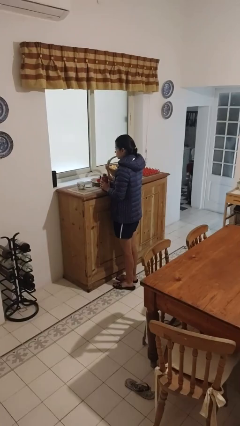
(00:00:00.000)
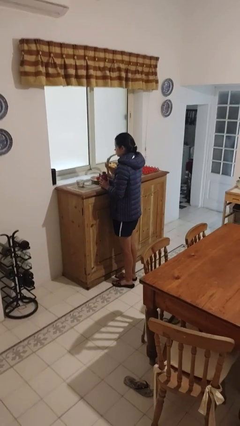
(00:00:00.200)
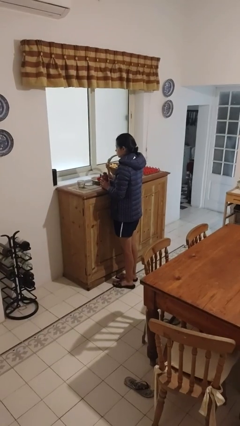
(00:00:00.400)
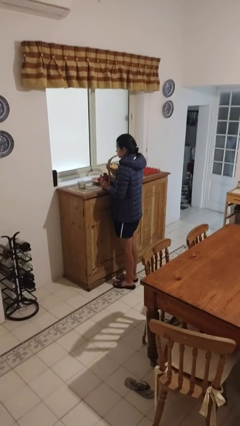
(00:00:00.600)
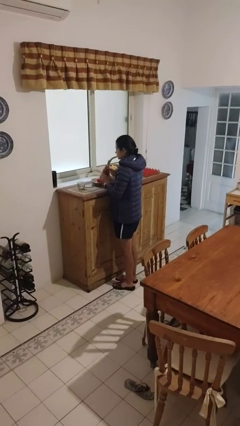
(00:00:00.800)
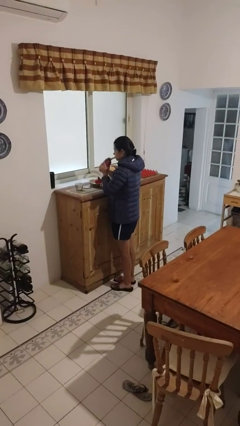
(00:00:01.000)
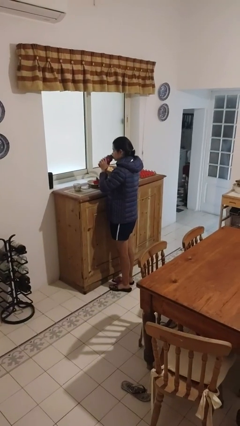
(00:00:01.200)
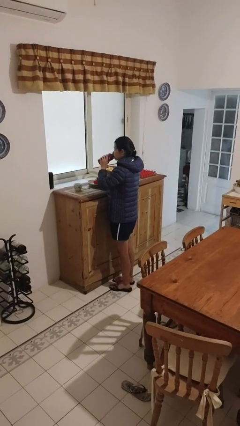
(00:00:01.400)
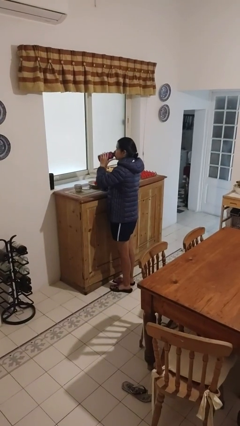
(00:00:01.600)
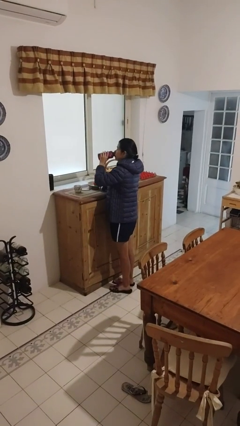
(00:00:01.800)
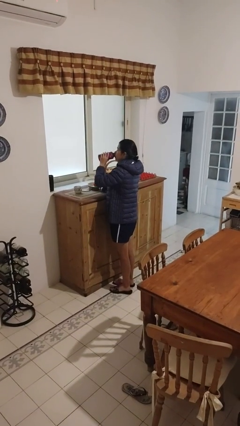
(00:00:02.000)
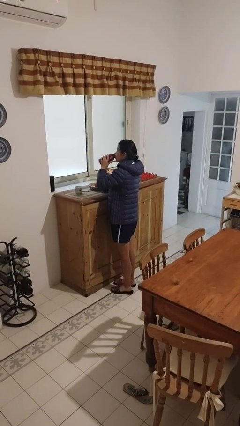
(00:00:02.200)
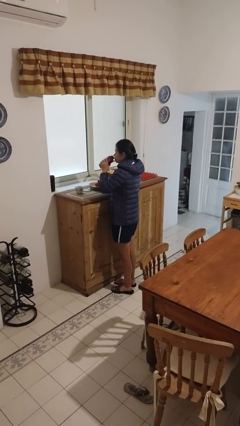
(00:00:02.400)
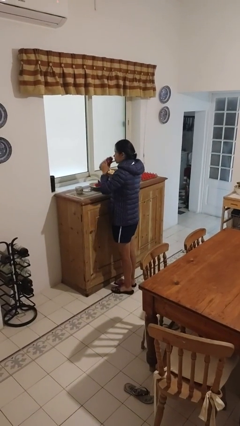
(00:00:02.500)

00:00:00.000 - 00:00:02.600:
person drinks from bottle

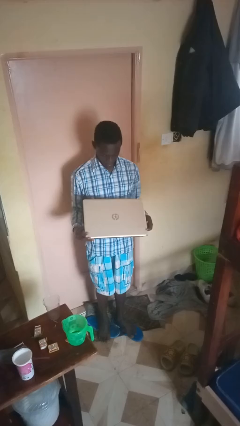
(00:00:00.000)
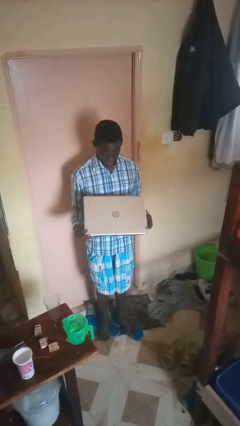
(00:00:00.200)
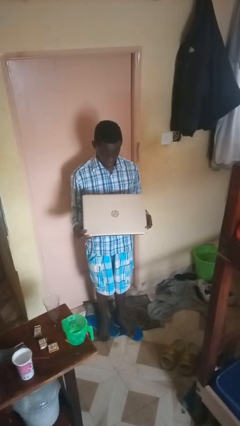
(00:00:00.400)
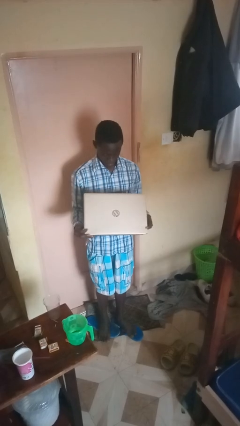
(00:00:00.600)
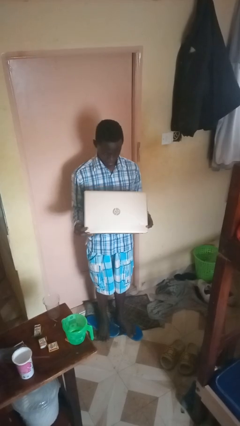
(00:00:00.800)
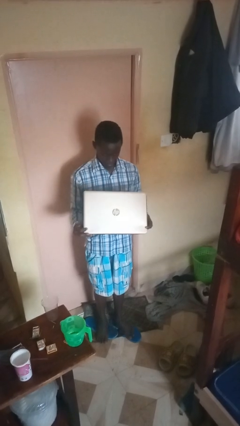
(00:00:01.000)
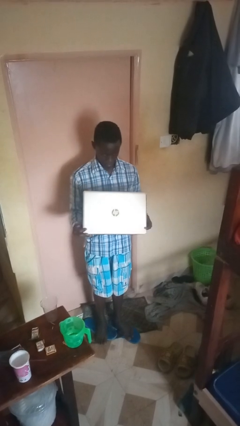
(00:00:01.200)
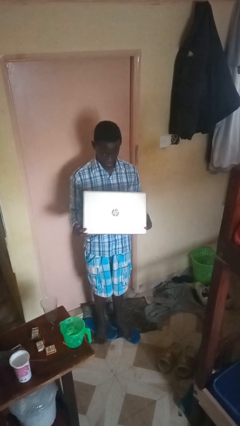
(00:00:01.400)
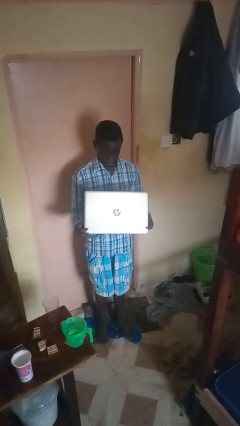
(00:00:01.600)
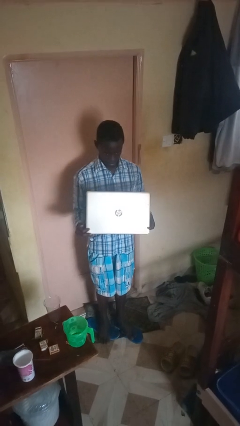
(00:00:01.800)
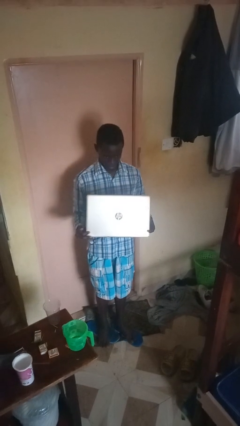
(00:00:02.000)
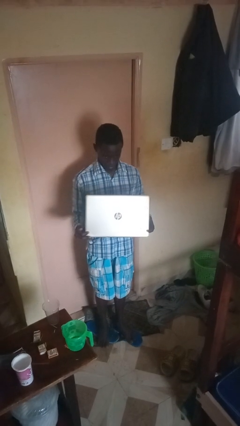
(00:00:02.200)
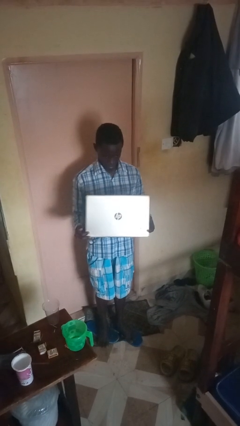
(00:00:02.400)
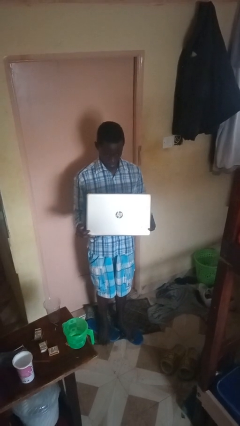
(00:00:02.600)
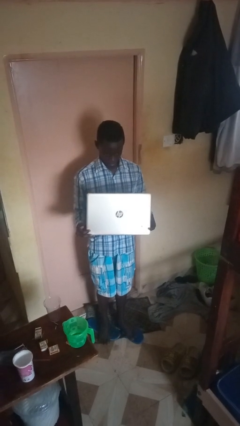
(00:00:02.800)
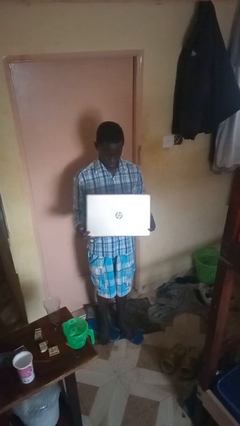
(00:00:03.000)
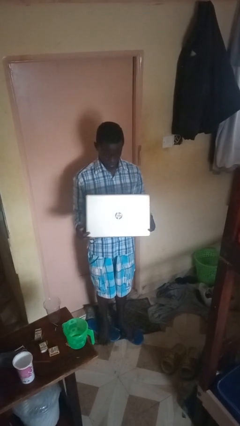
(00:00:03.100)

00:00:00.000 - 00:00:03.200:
person opens laptop

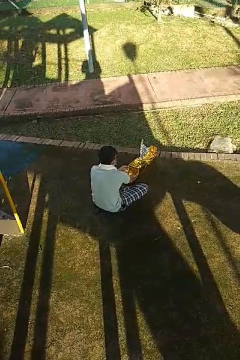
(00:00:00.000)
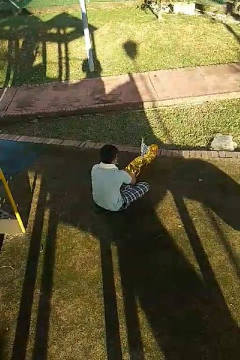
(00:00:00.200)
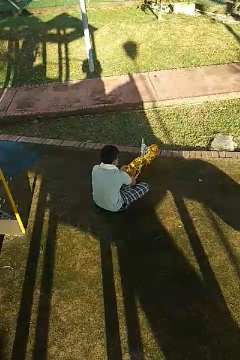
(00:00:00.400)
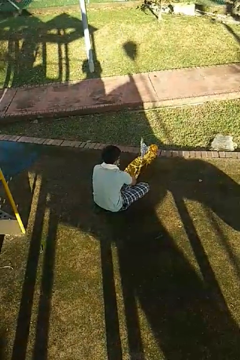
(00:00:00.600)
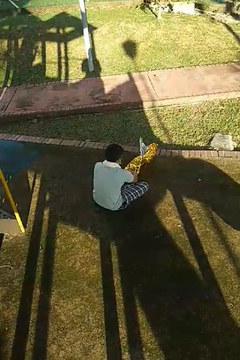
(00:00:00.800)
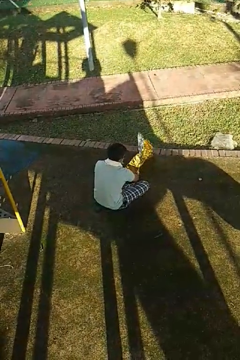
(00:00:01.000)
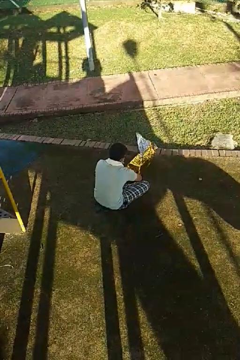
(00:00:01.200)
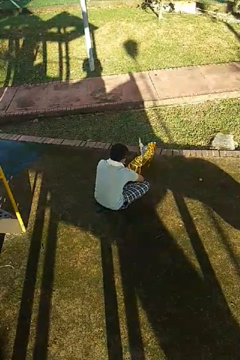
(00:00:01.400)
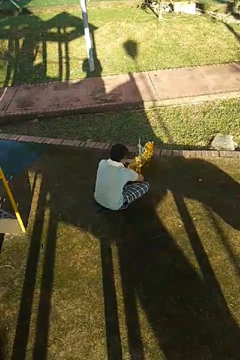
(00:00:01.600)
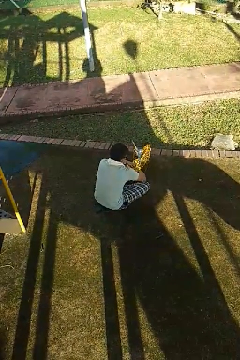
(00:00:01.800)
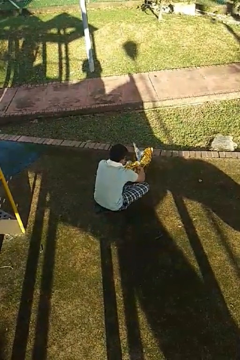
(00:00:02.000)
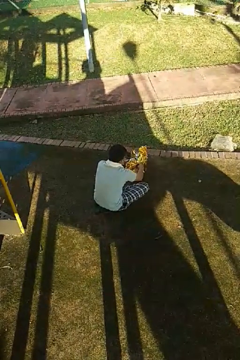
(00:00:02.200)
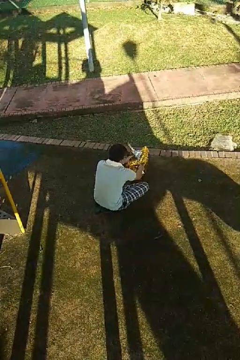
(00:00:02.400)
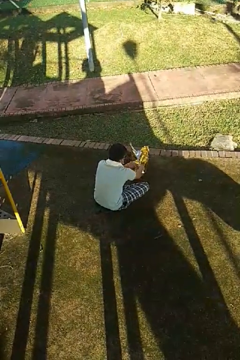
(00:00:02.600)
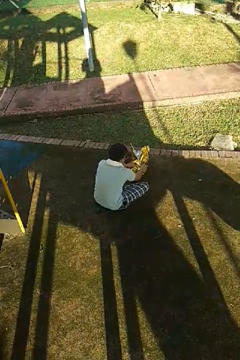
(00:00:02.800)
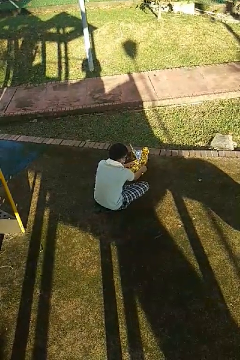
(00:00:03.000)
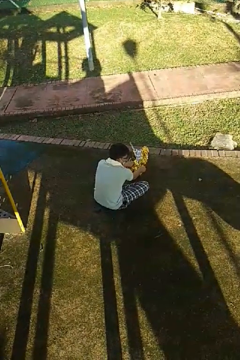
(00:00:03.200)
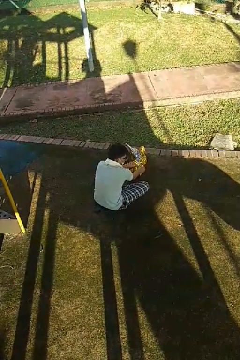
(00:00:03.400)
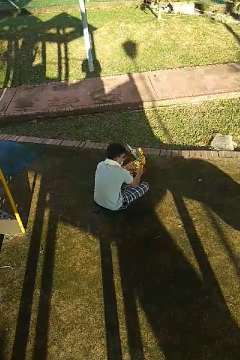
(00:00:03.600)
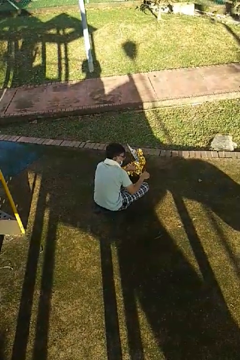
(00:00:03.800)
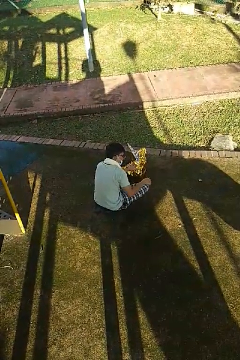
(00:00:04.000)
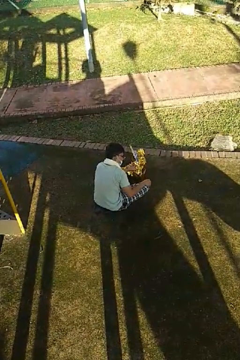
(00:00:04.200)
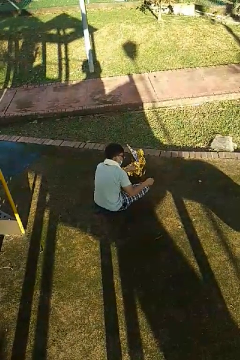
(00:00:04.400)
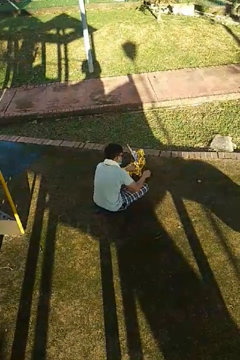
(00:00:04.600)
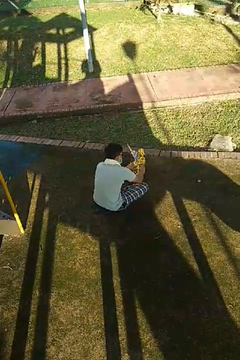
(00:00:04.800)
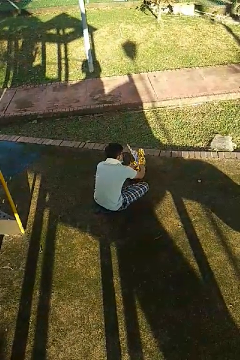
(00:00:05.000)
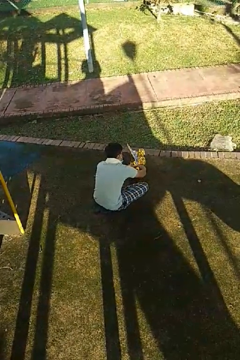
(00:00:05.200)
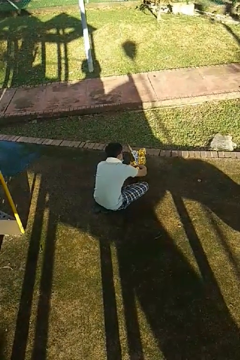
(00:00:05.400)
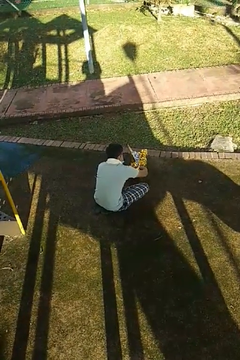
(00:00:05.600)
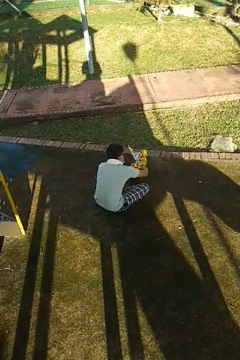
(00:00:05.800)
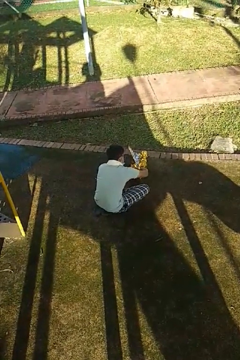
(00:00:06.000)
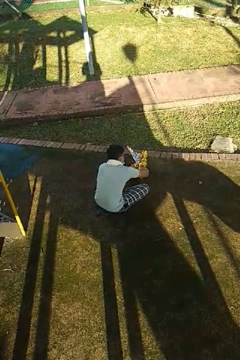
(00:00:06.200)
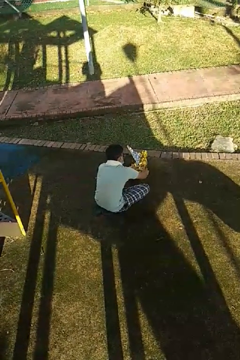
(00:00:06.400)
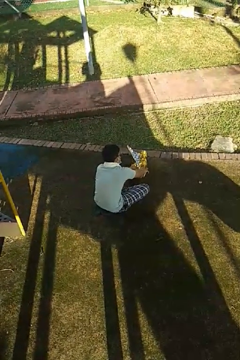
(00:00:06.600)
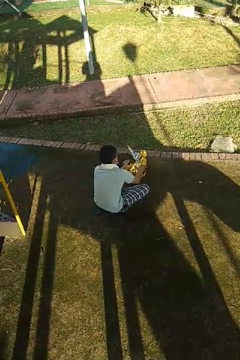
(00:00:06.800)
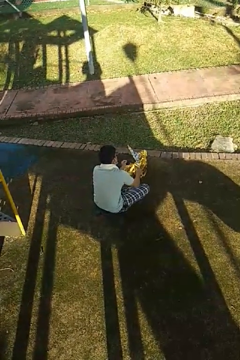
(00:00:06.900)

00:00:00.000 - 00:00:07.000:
person wraps box

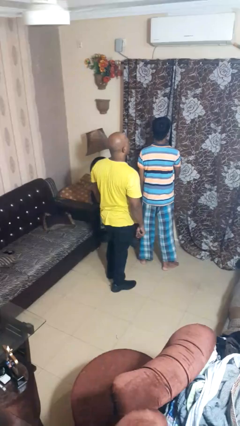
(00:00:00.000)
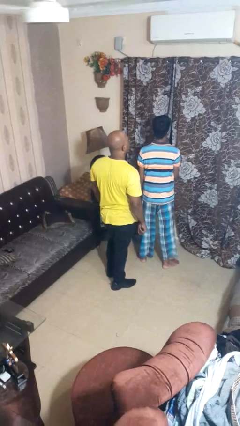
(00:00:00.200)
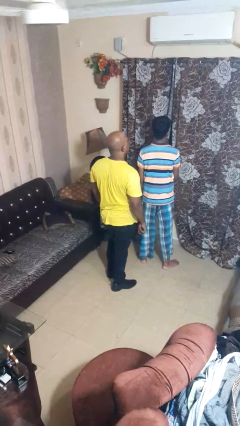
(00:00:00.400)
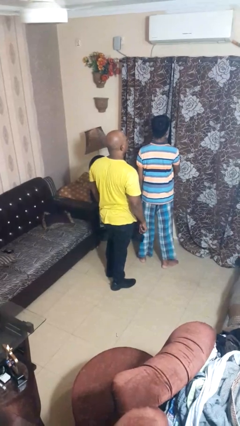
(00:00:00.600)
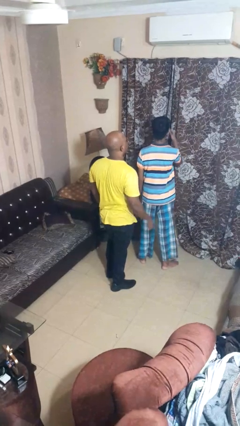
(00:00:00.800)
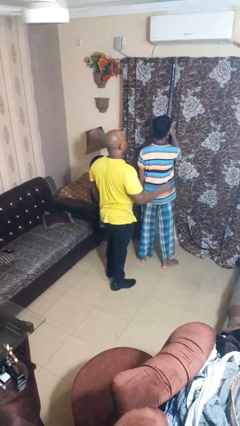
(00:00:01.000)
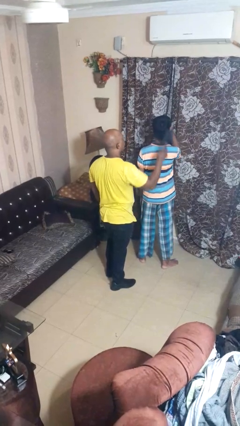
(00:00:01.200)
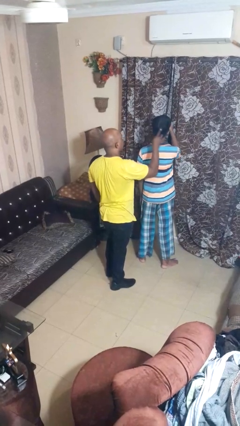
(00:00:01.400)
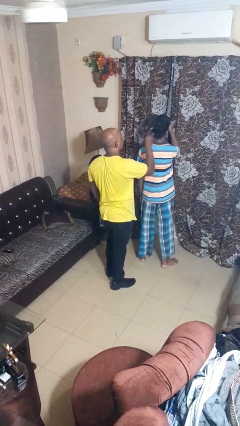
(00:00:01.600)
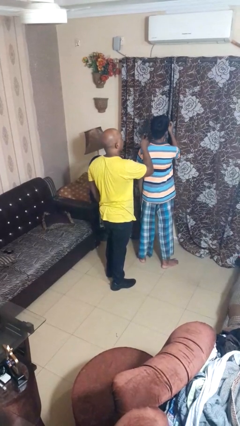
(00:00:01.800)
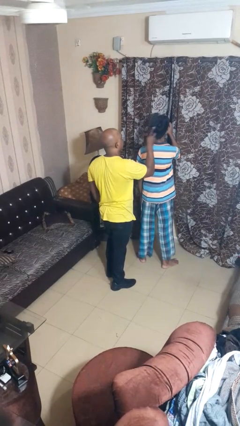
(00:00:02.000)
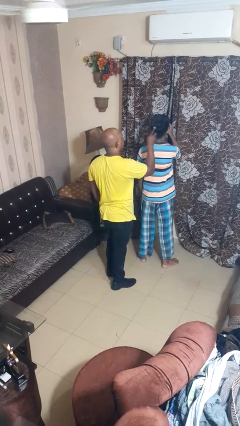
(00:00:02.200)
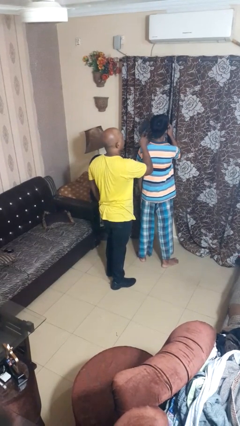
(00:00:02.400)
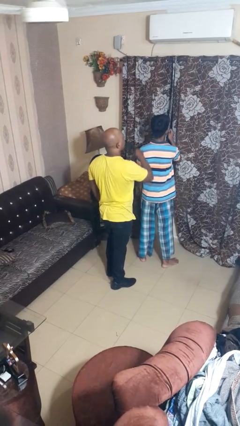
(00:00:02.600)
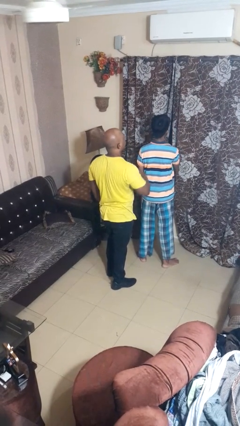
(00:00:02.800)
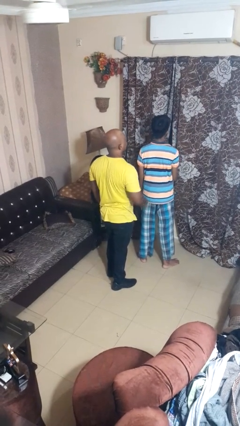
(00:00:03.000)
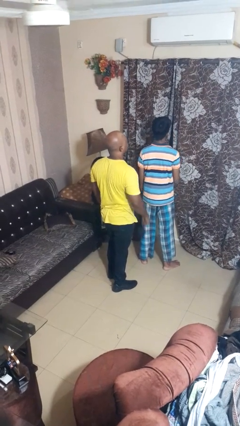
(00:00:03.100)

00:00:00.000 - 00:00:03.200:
person brushes hair of person

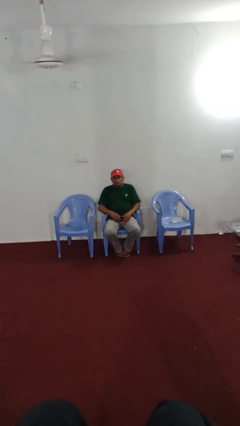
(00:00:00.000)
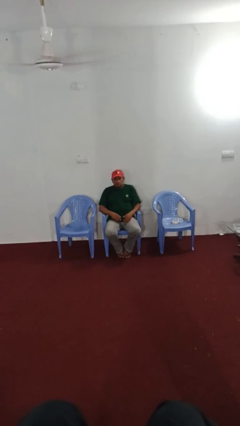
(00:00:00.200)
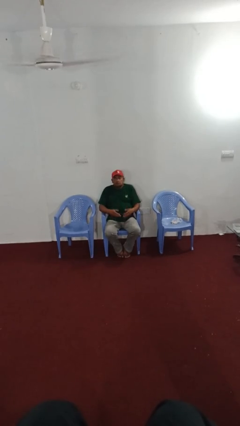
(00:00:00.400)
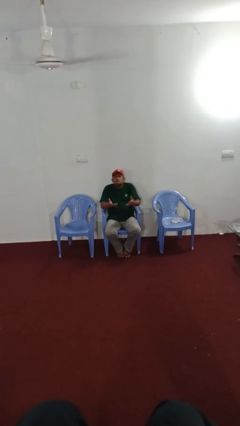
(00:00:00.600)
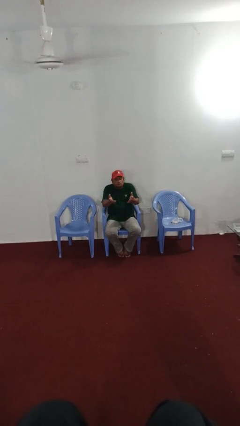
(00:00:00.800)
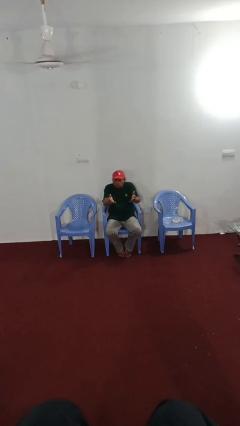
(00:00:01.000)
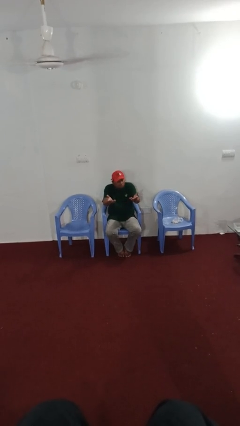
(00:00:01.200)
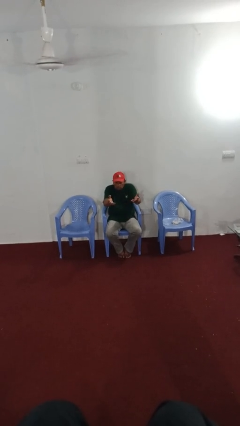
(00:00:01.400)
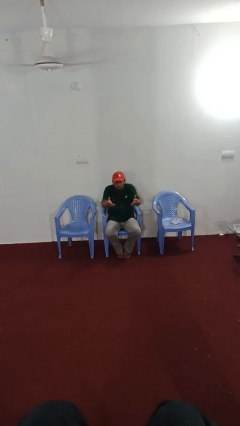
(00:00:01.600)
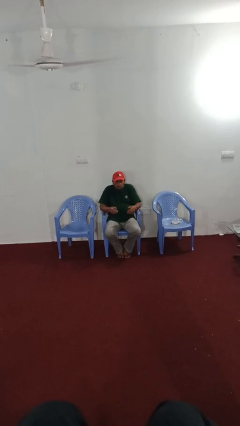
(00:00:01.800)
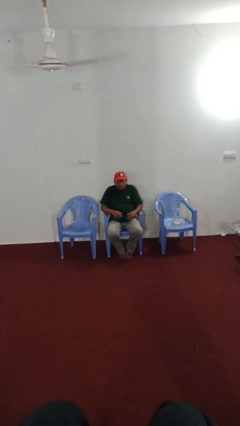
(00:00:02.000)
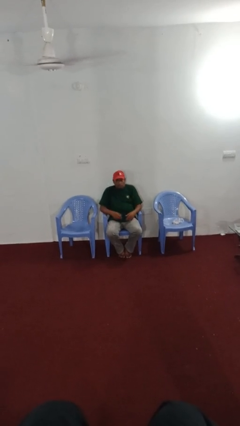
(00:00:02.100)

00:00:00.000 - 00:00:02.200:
person shrugs

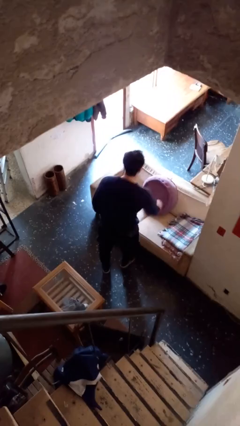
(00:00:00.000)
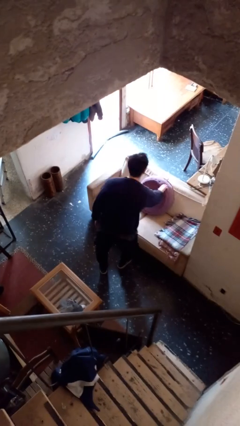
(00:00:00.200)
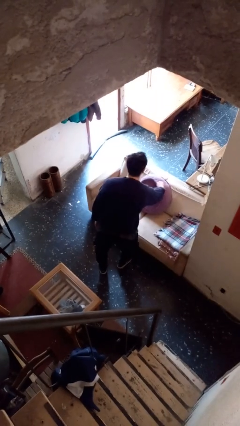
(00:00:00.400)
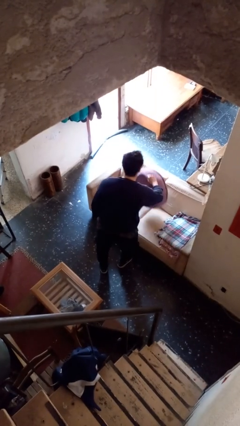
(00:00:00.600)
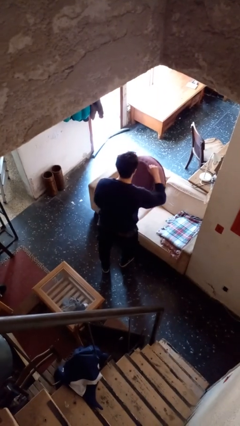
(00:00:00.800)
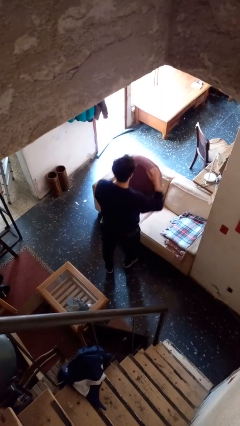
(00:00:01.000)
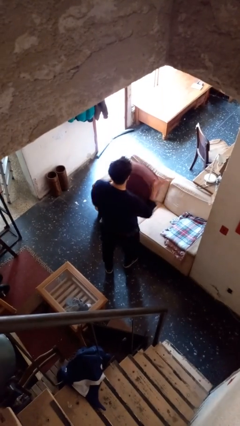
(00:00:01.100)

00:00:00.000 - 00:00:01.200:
person picks up object from couch